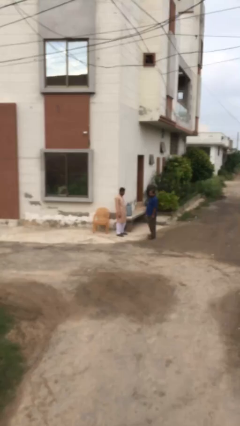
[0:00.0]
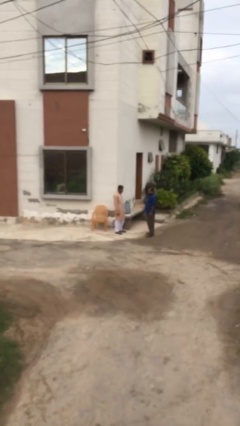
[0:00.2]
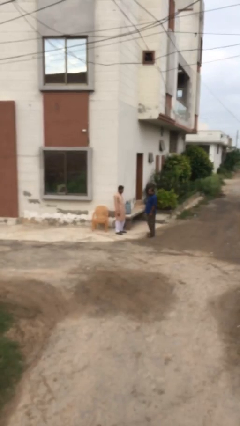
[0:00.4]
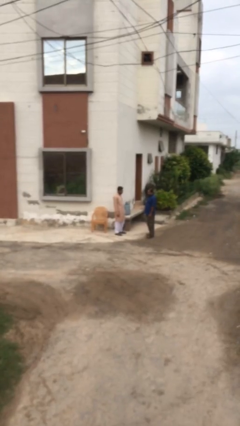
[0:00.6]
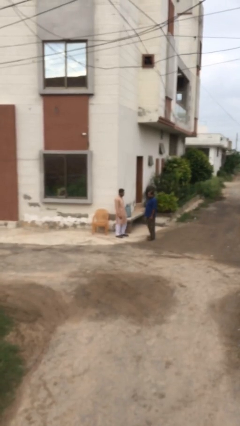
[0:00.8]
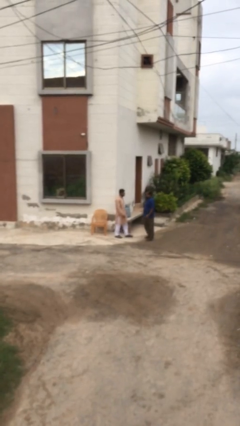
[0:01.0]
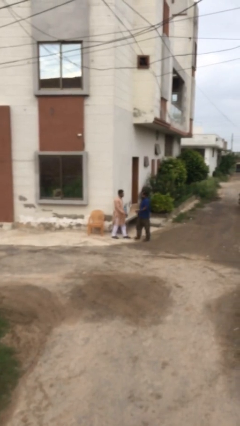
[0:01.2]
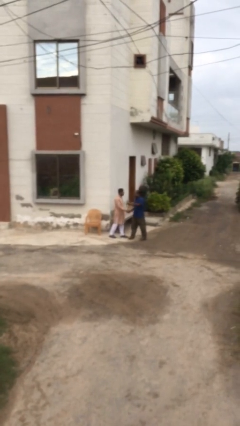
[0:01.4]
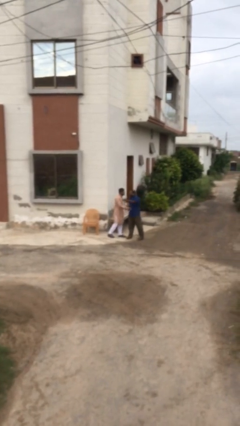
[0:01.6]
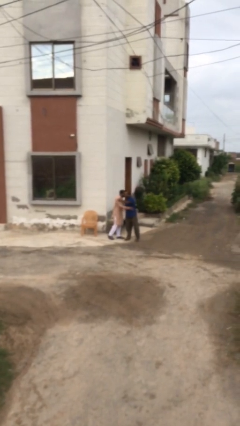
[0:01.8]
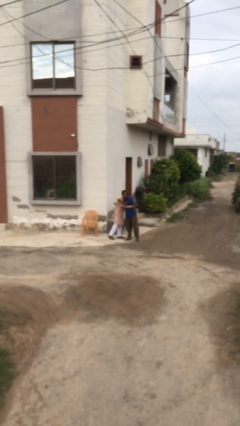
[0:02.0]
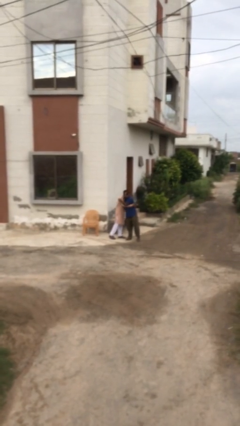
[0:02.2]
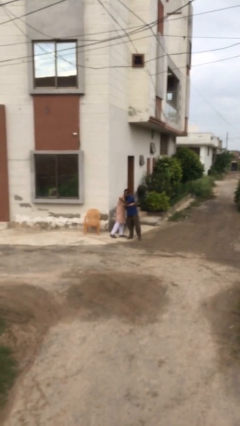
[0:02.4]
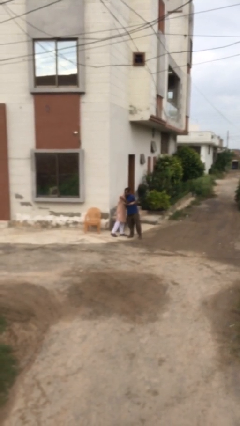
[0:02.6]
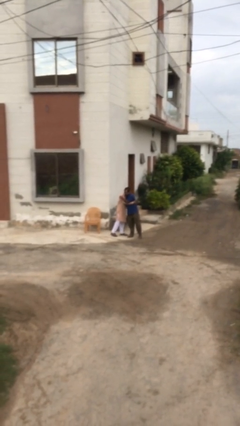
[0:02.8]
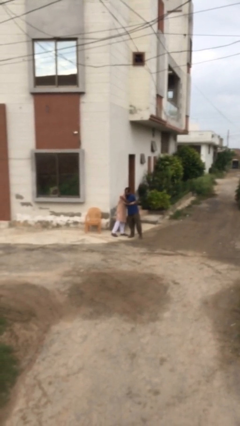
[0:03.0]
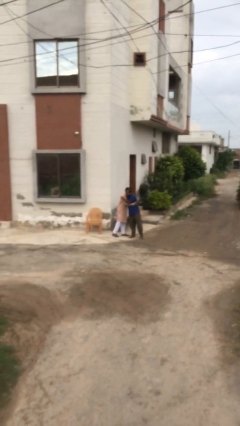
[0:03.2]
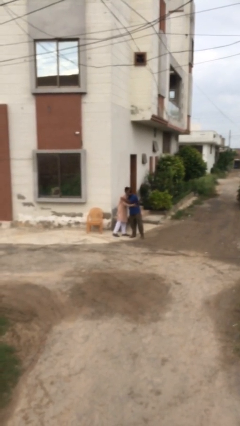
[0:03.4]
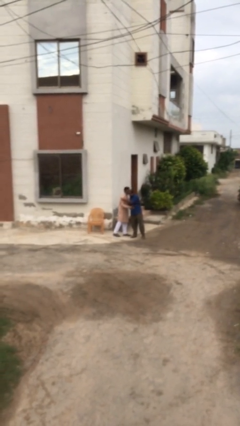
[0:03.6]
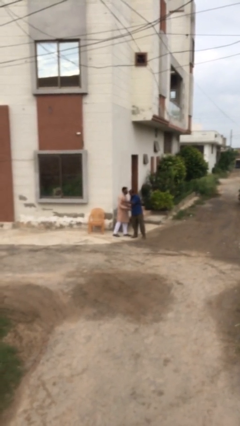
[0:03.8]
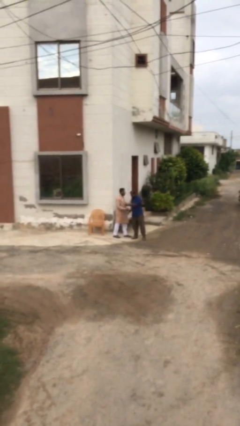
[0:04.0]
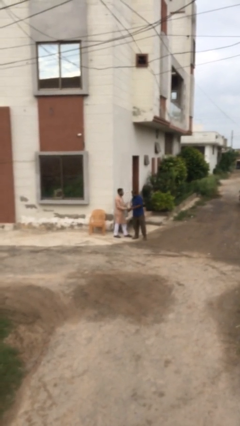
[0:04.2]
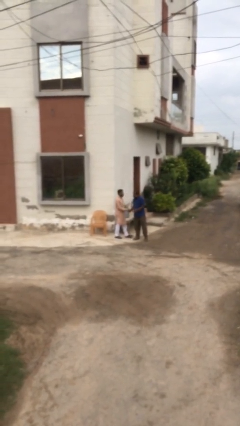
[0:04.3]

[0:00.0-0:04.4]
person embraces person

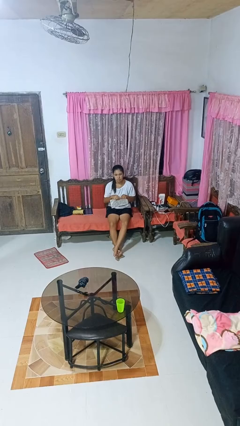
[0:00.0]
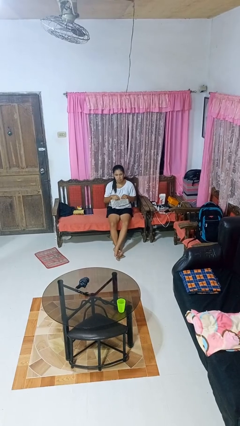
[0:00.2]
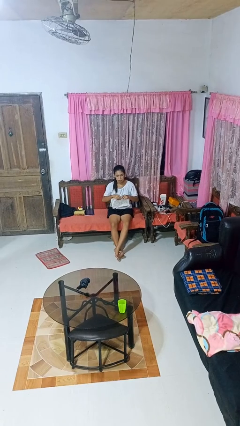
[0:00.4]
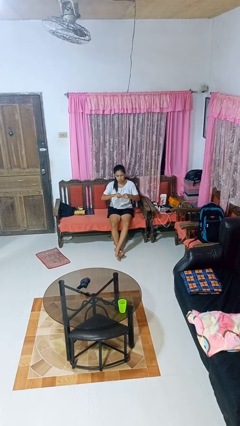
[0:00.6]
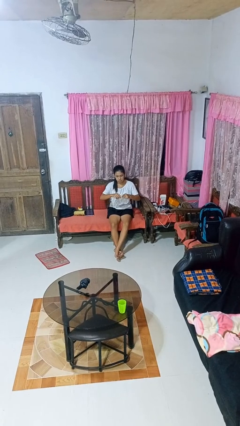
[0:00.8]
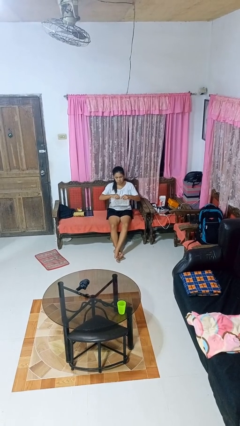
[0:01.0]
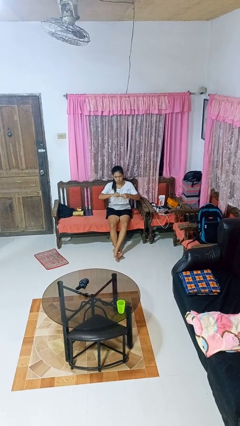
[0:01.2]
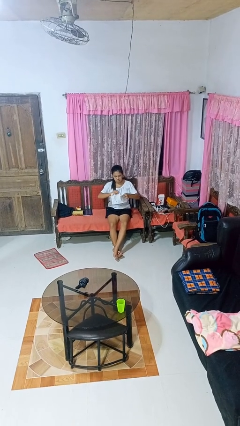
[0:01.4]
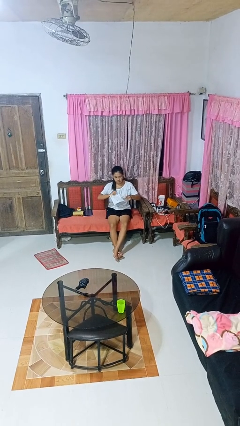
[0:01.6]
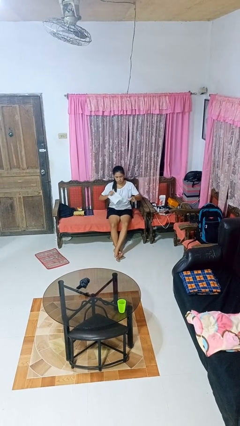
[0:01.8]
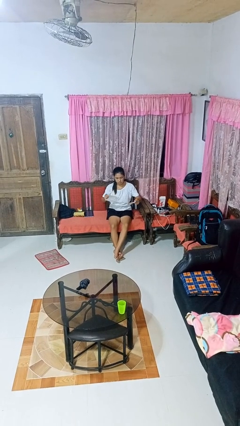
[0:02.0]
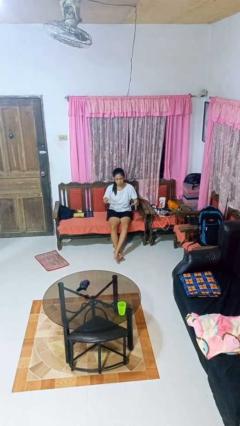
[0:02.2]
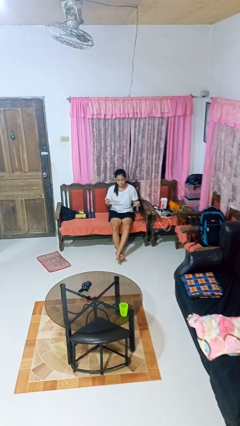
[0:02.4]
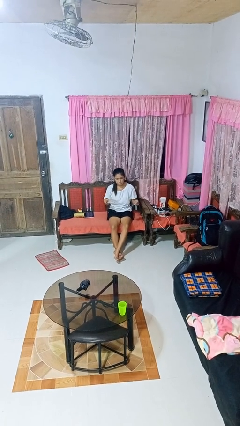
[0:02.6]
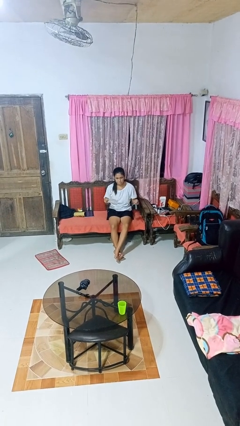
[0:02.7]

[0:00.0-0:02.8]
person tears paper

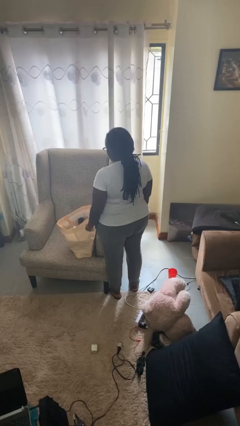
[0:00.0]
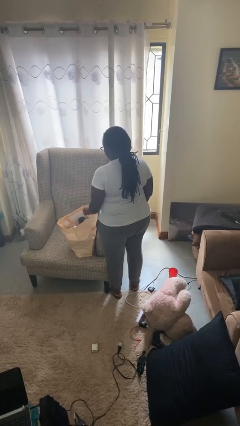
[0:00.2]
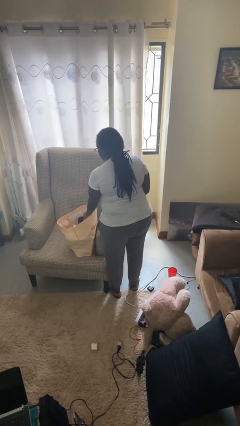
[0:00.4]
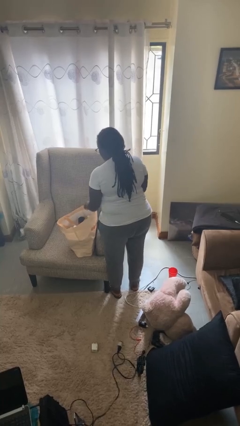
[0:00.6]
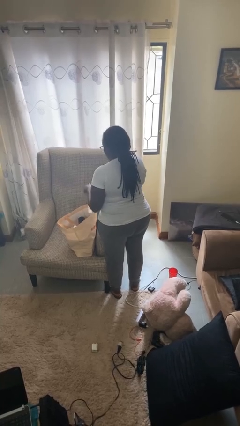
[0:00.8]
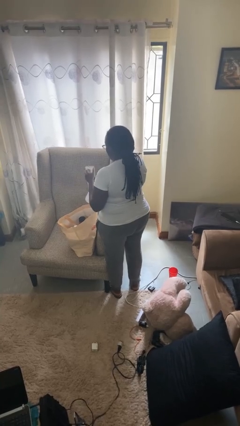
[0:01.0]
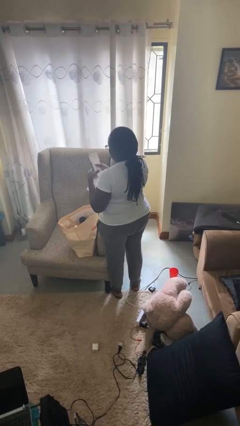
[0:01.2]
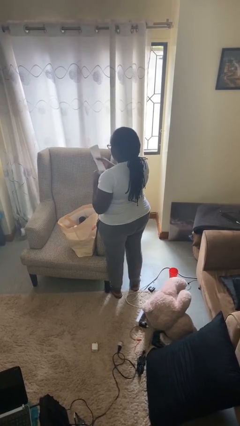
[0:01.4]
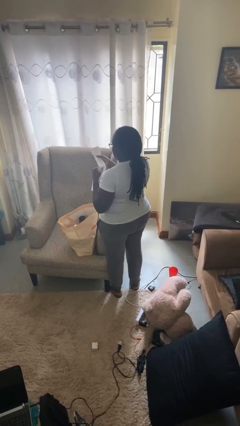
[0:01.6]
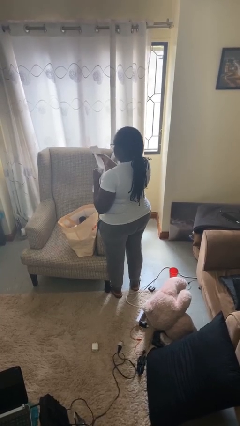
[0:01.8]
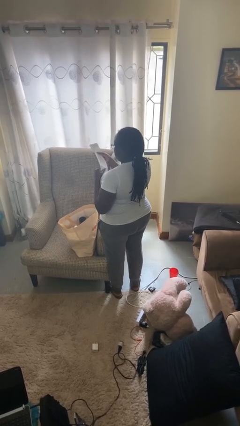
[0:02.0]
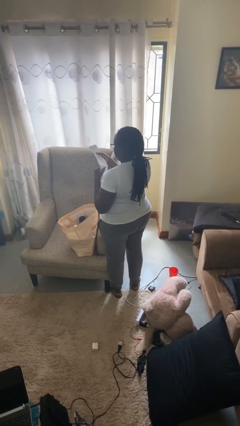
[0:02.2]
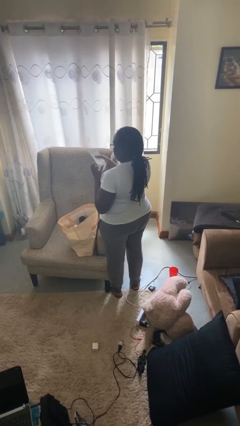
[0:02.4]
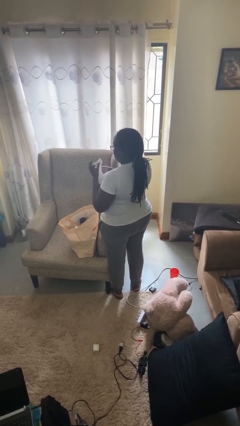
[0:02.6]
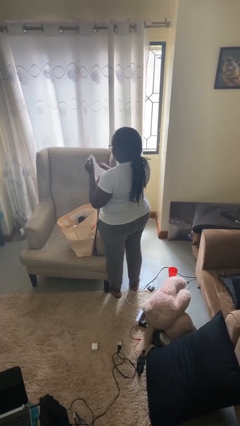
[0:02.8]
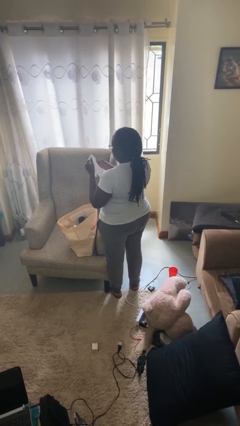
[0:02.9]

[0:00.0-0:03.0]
person takes object from bag

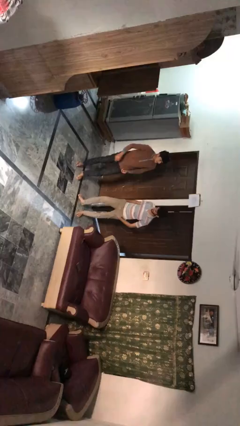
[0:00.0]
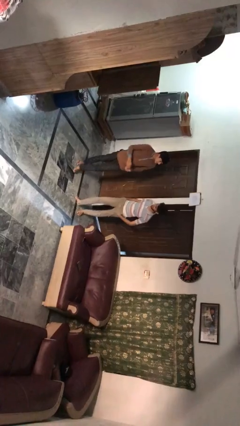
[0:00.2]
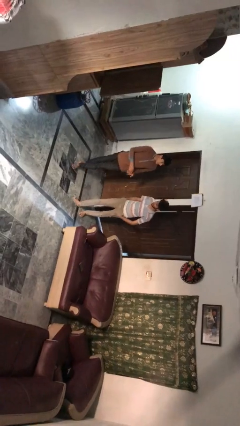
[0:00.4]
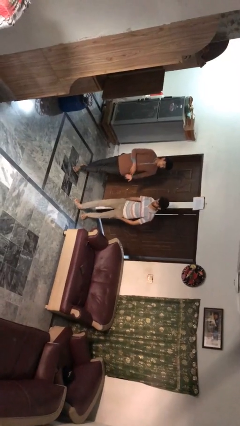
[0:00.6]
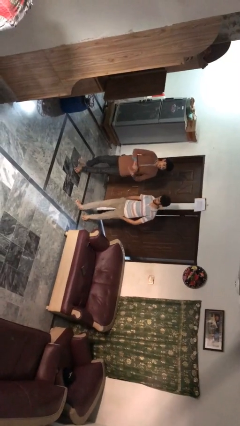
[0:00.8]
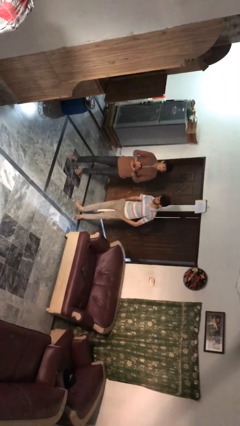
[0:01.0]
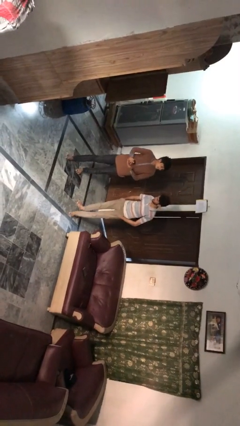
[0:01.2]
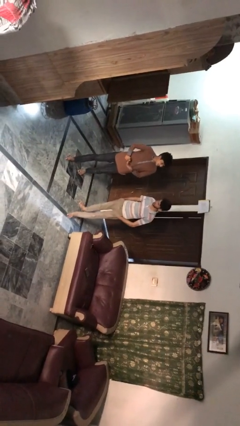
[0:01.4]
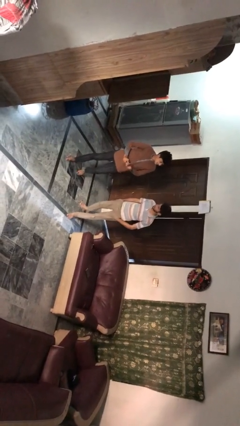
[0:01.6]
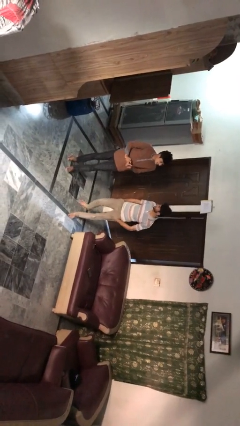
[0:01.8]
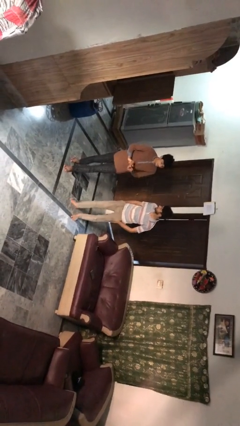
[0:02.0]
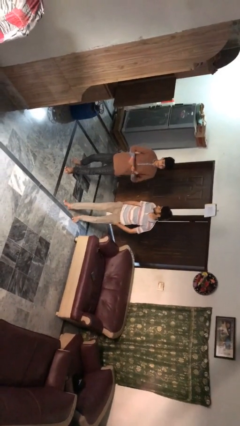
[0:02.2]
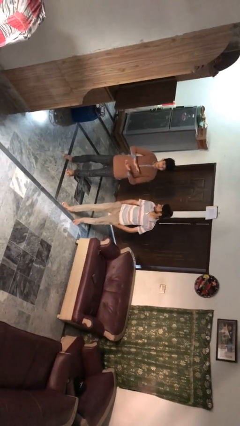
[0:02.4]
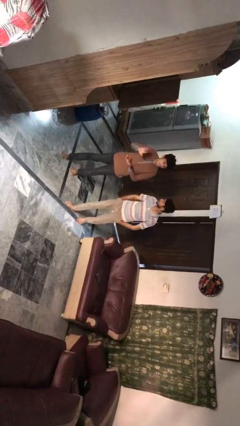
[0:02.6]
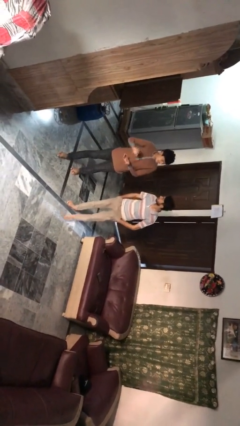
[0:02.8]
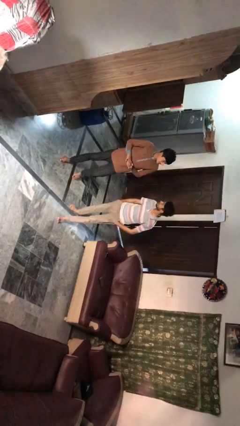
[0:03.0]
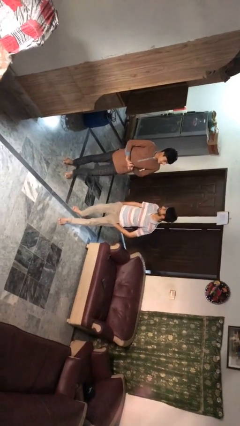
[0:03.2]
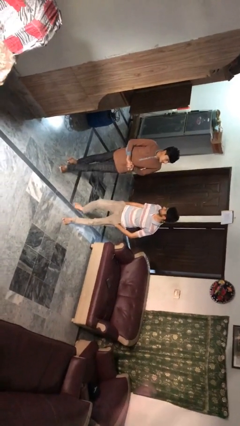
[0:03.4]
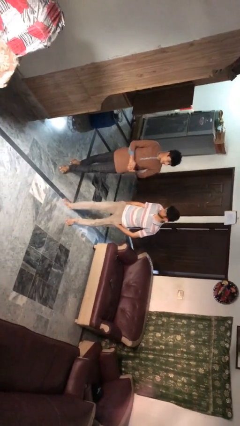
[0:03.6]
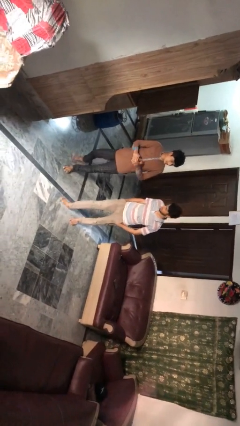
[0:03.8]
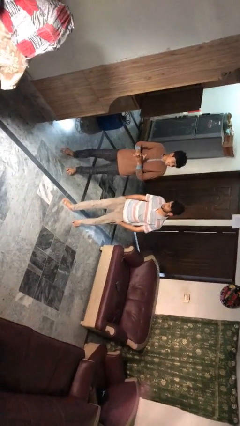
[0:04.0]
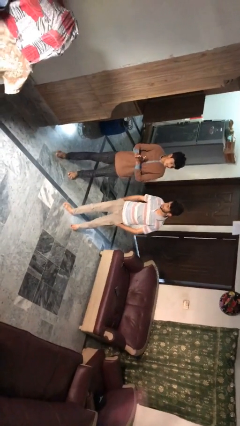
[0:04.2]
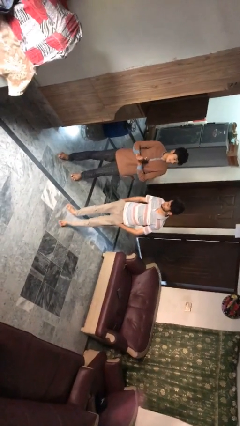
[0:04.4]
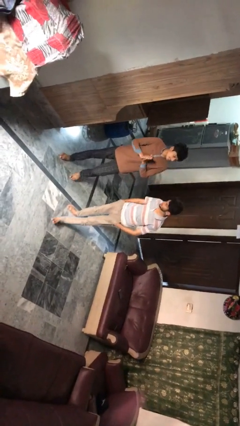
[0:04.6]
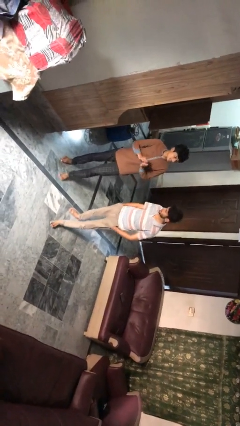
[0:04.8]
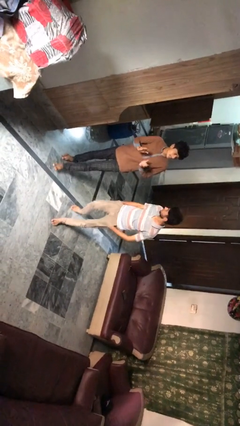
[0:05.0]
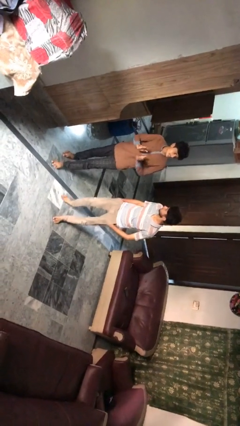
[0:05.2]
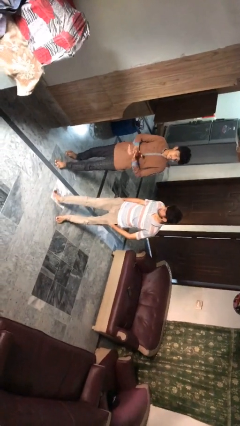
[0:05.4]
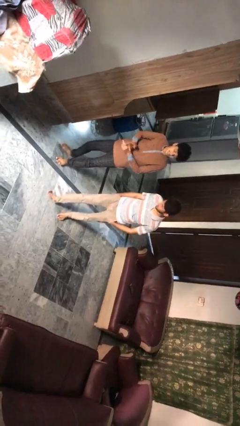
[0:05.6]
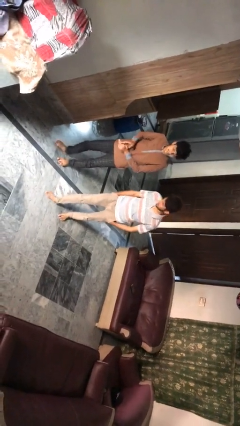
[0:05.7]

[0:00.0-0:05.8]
person talks to person

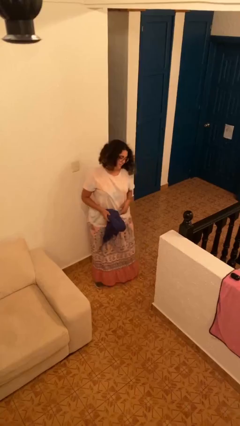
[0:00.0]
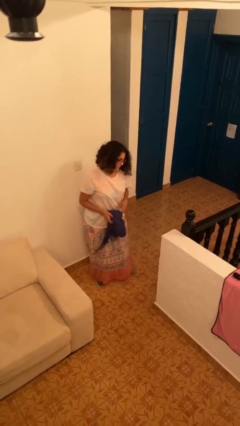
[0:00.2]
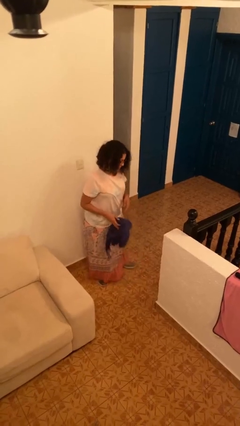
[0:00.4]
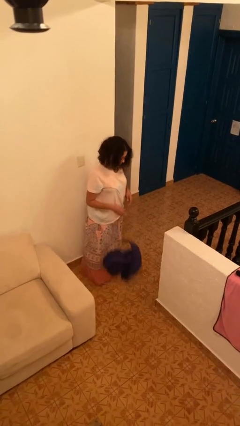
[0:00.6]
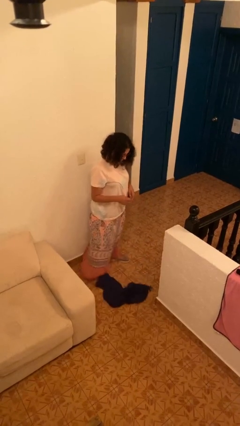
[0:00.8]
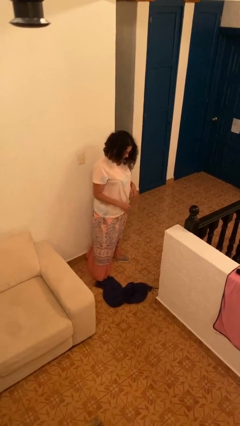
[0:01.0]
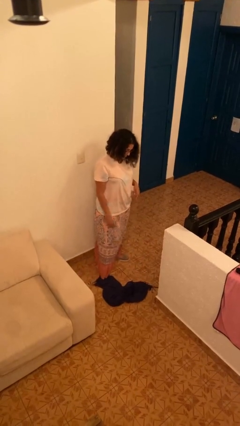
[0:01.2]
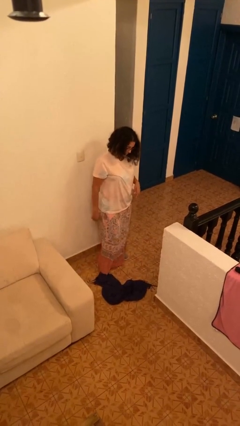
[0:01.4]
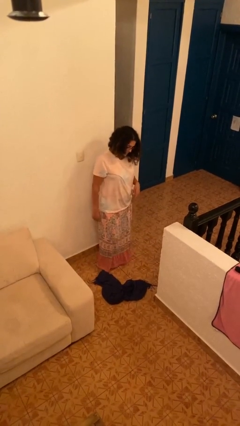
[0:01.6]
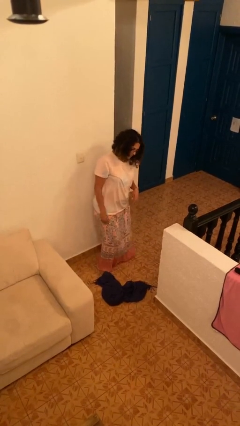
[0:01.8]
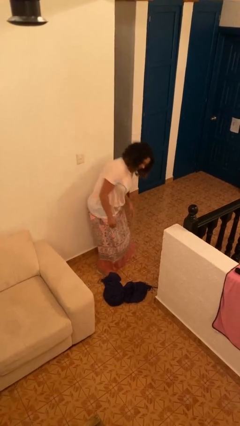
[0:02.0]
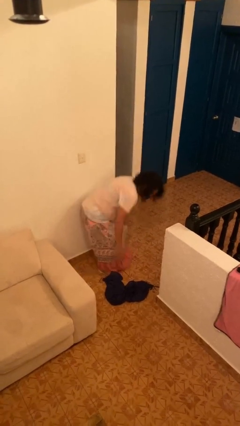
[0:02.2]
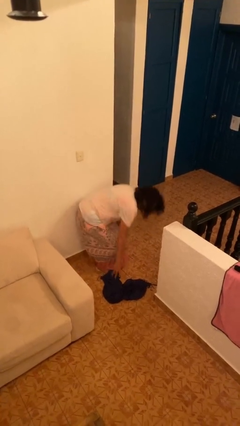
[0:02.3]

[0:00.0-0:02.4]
person drops object
